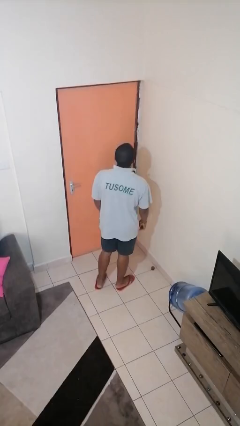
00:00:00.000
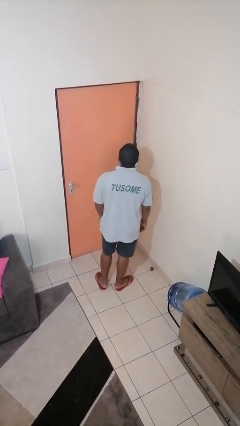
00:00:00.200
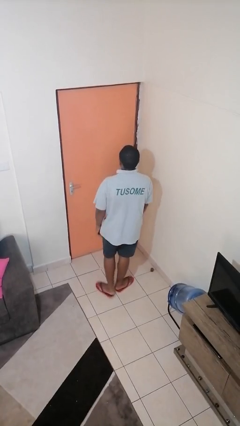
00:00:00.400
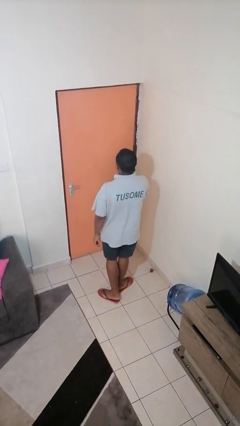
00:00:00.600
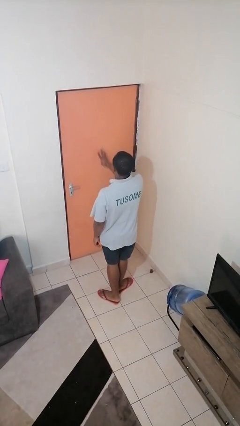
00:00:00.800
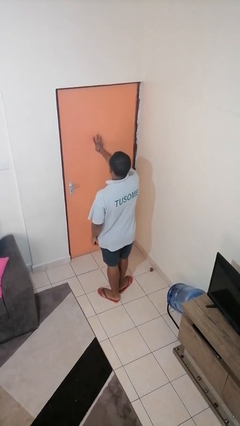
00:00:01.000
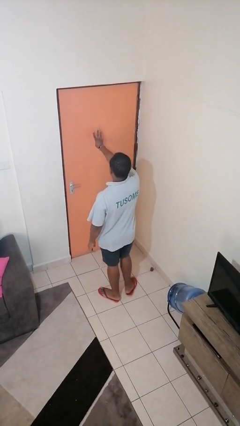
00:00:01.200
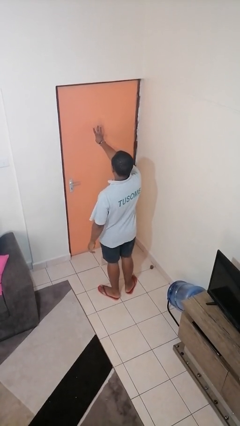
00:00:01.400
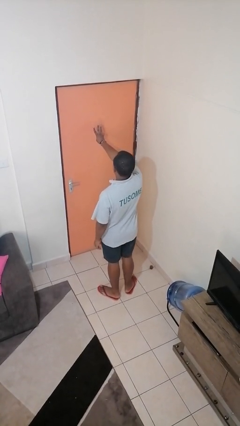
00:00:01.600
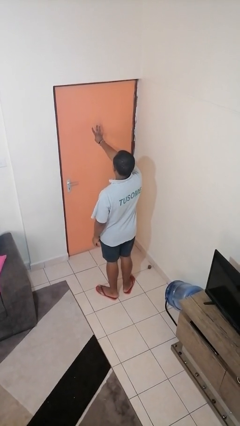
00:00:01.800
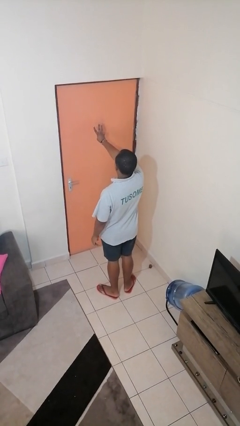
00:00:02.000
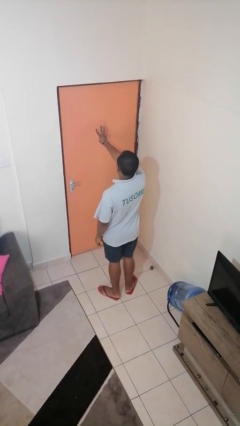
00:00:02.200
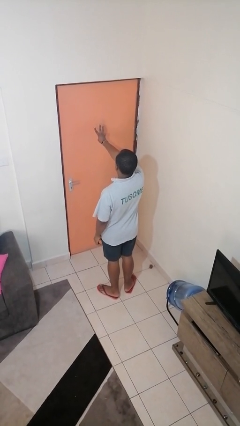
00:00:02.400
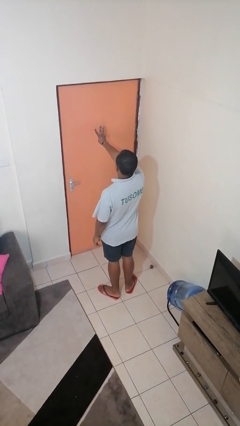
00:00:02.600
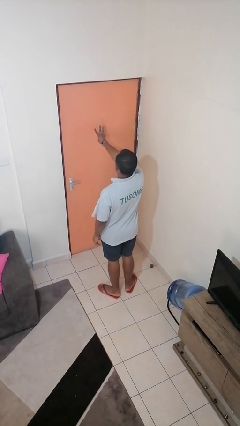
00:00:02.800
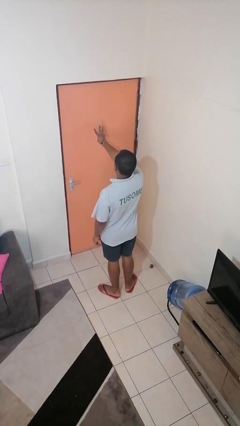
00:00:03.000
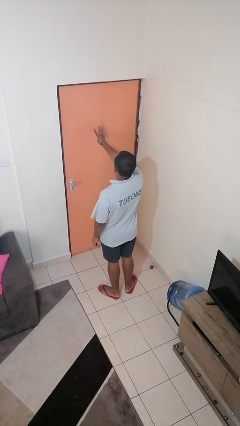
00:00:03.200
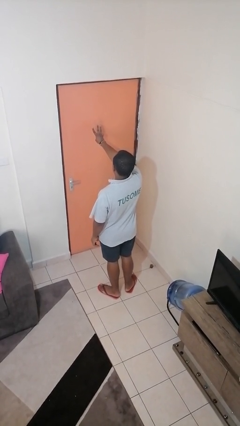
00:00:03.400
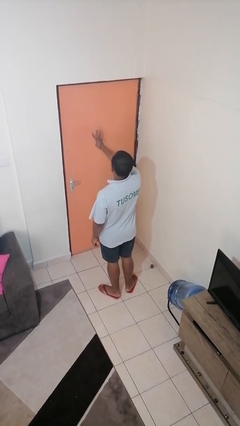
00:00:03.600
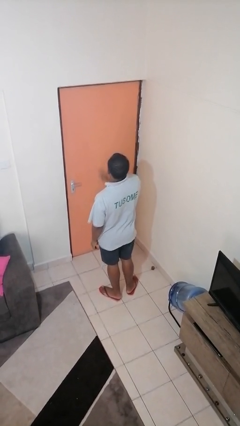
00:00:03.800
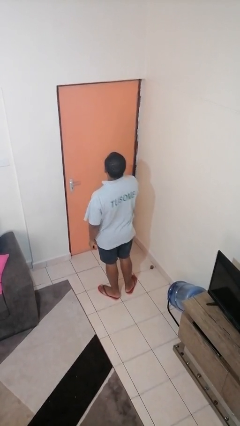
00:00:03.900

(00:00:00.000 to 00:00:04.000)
person gestures number three

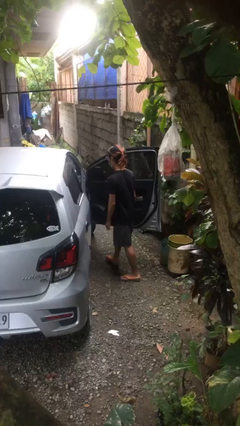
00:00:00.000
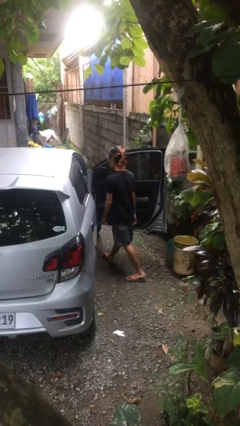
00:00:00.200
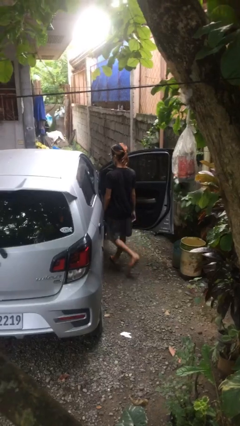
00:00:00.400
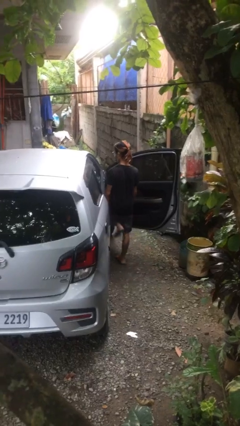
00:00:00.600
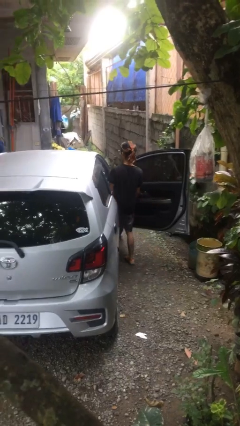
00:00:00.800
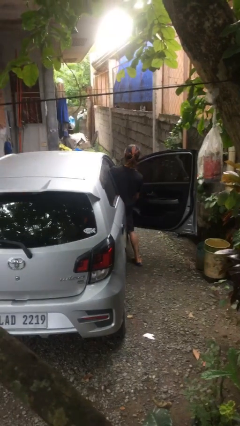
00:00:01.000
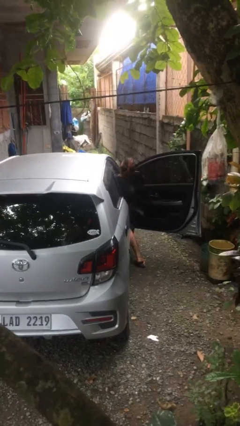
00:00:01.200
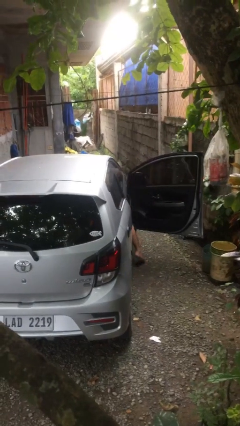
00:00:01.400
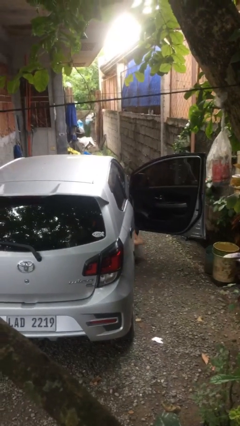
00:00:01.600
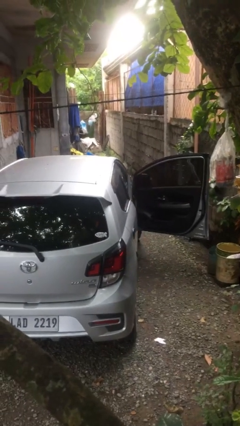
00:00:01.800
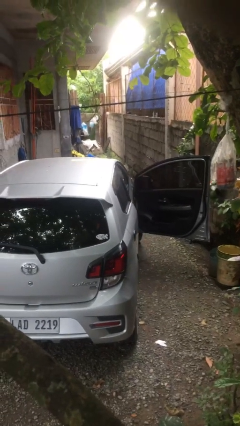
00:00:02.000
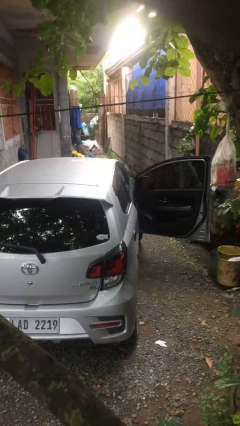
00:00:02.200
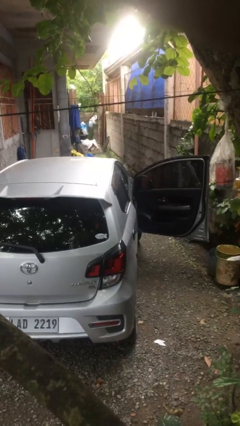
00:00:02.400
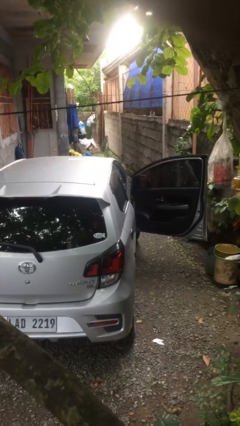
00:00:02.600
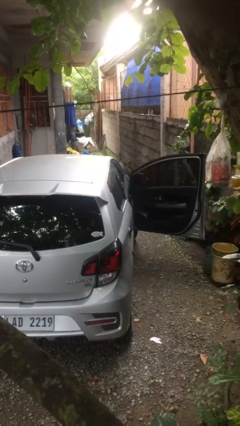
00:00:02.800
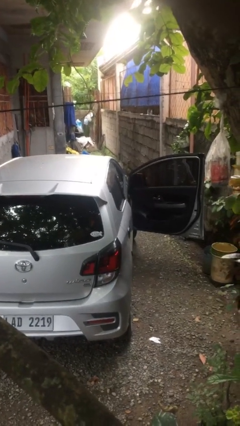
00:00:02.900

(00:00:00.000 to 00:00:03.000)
person enters car

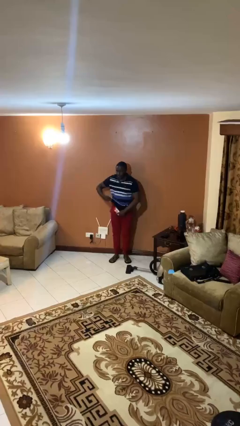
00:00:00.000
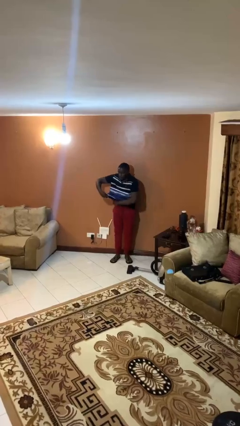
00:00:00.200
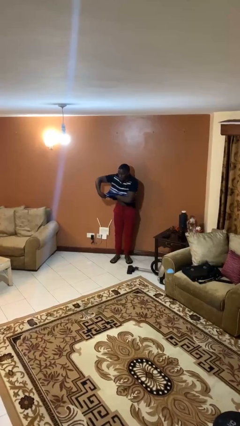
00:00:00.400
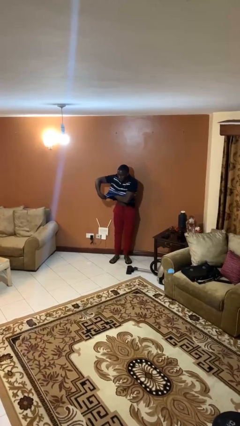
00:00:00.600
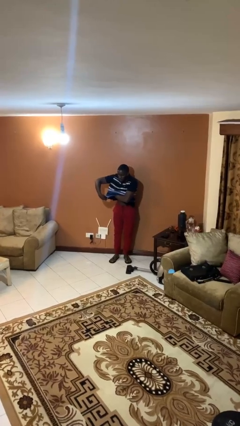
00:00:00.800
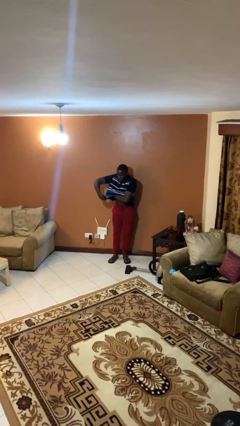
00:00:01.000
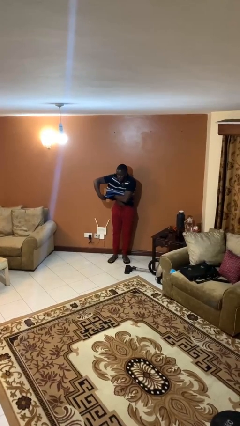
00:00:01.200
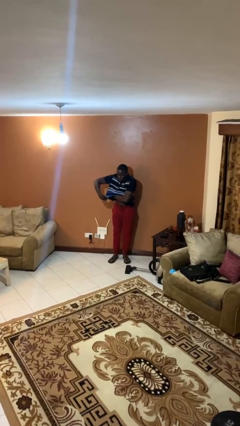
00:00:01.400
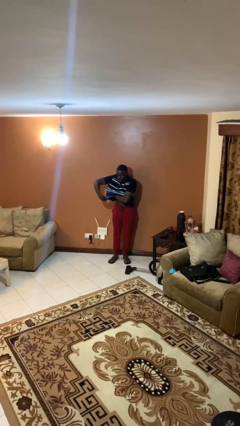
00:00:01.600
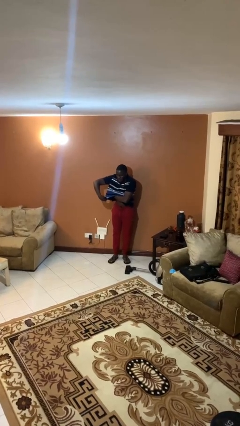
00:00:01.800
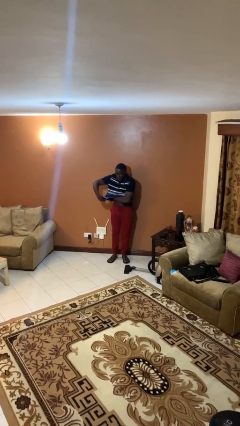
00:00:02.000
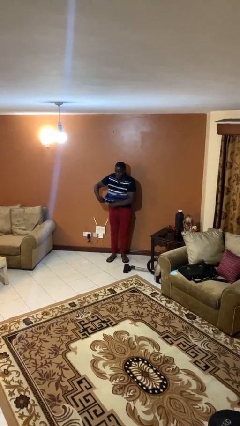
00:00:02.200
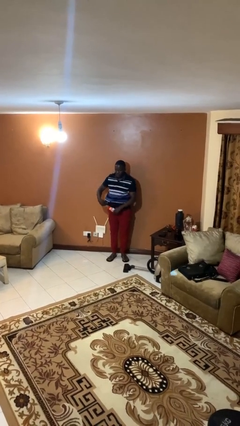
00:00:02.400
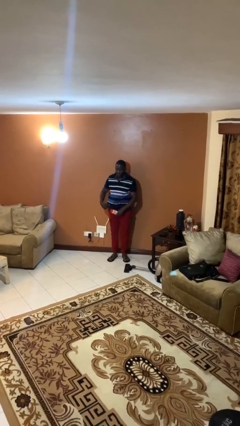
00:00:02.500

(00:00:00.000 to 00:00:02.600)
person applies deodorant

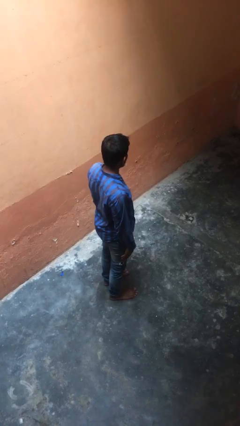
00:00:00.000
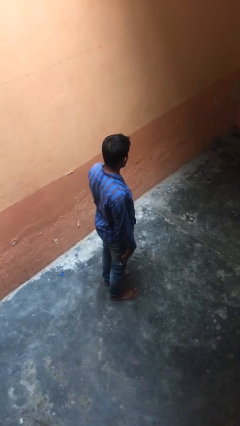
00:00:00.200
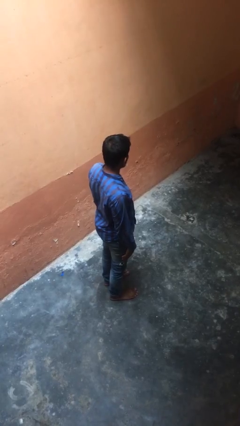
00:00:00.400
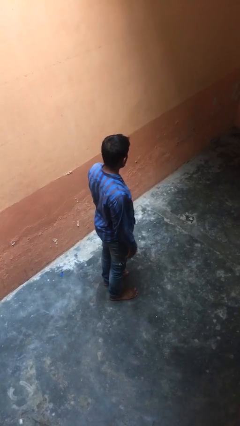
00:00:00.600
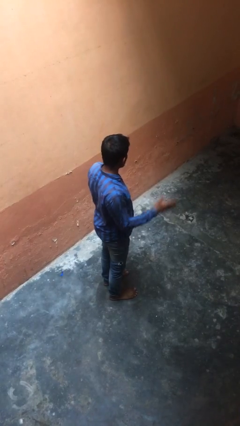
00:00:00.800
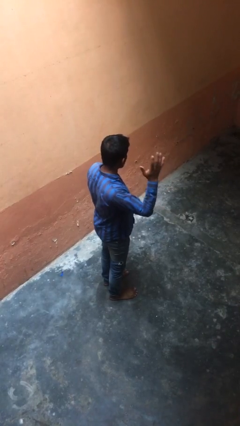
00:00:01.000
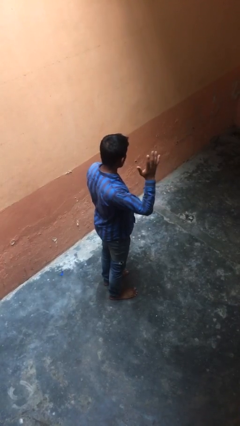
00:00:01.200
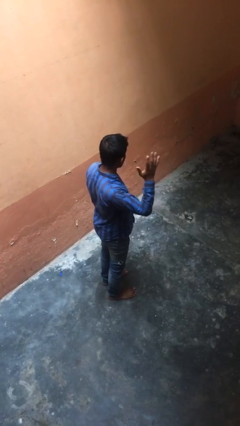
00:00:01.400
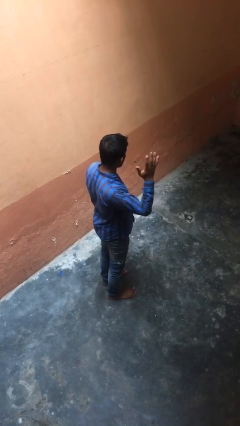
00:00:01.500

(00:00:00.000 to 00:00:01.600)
person gestures number five

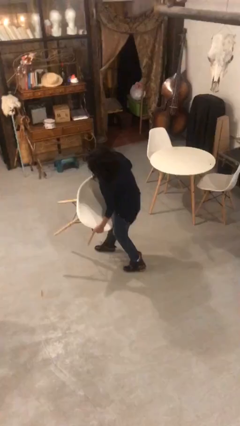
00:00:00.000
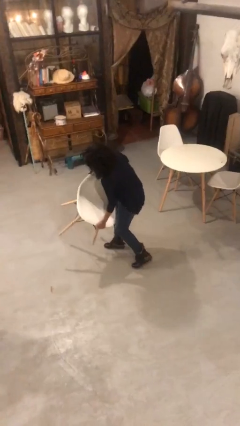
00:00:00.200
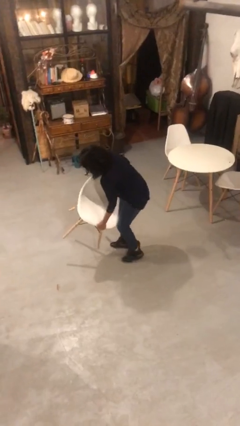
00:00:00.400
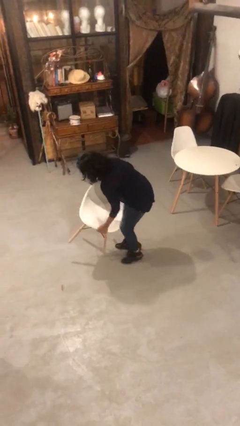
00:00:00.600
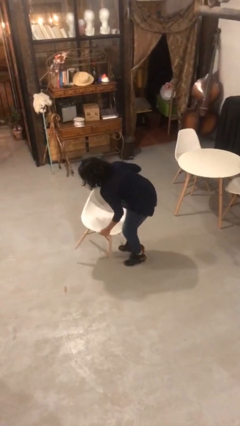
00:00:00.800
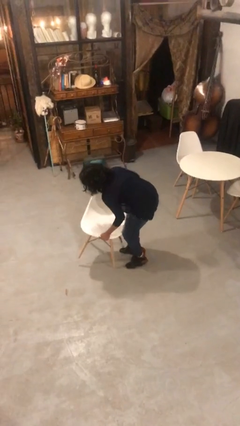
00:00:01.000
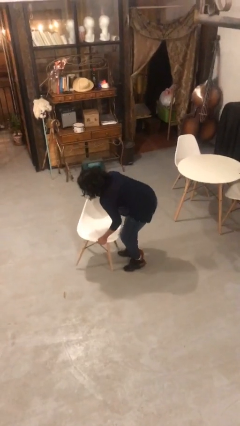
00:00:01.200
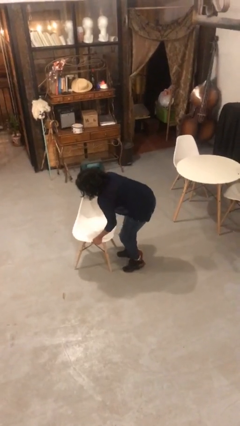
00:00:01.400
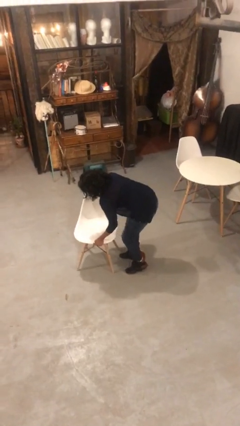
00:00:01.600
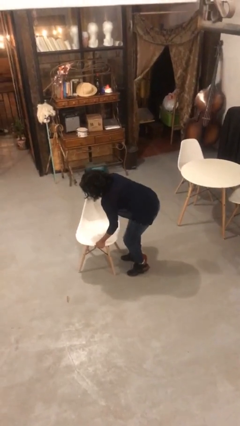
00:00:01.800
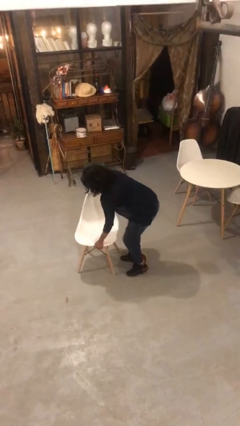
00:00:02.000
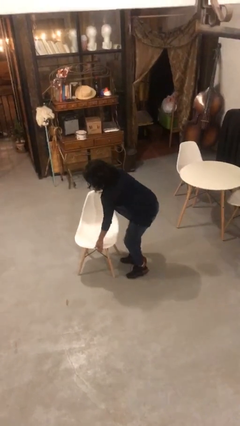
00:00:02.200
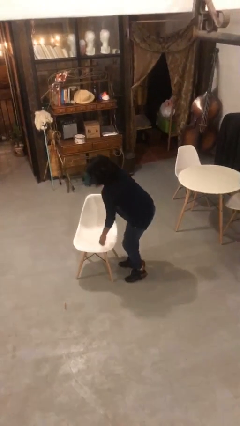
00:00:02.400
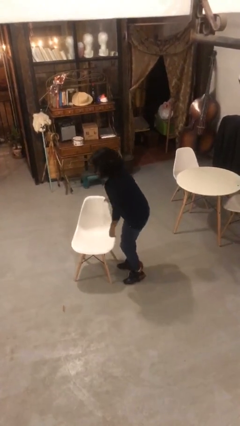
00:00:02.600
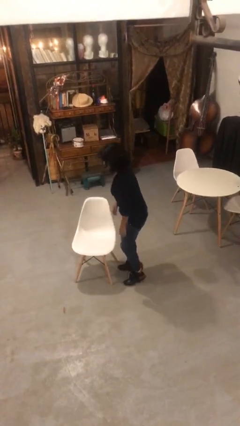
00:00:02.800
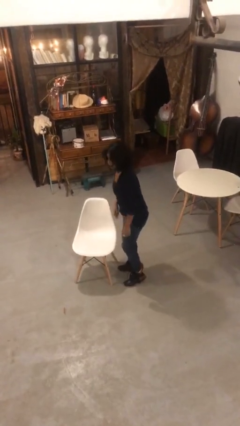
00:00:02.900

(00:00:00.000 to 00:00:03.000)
person puts down object on floor

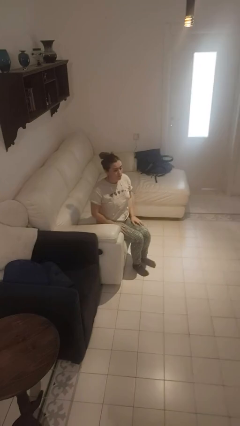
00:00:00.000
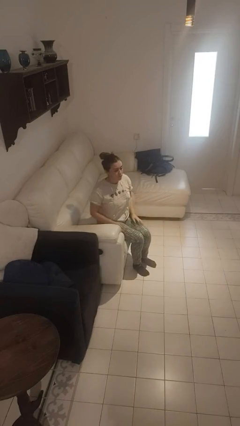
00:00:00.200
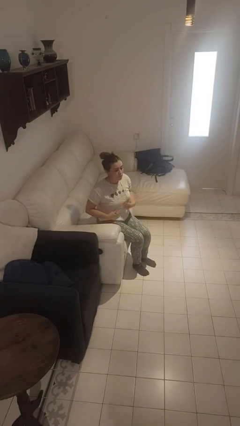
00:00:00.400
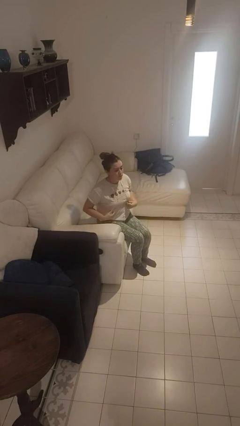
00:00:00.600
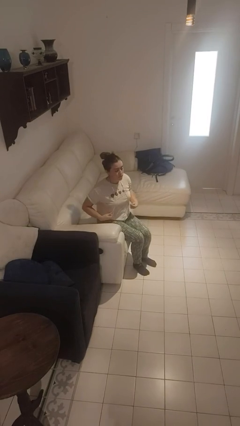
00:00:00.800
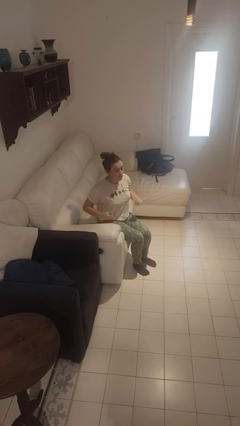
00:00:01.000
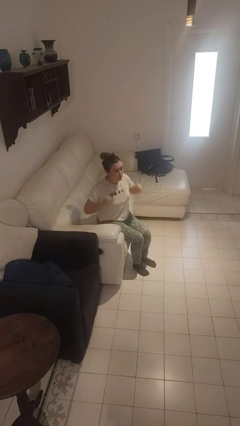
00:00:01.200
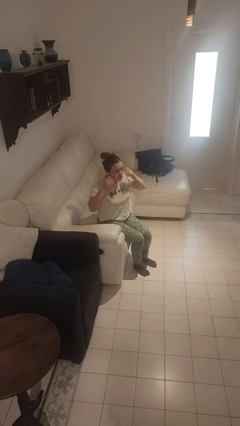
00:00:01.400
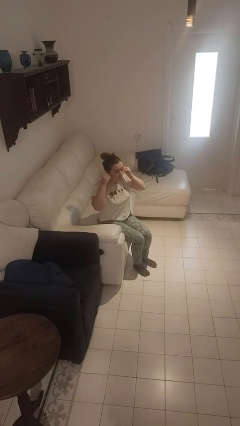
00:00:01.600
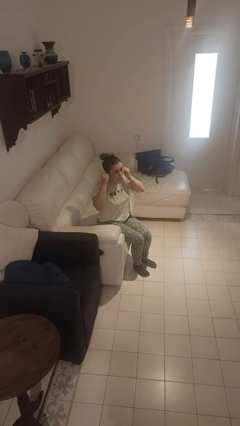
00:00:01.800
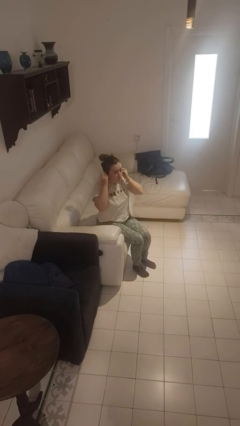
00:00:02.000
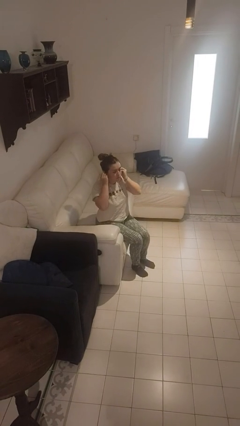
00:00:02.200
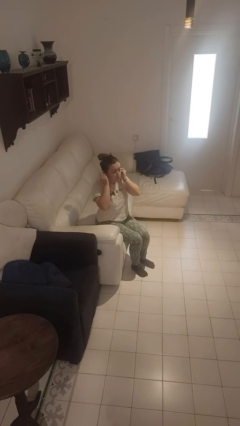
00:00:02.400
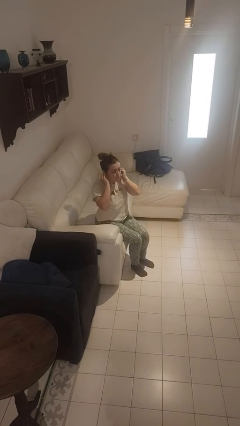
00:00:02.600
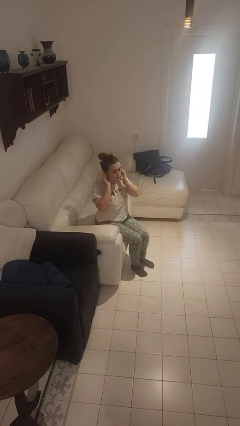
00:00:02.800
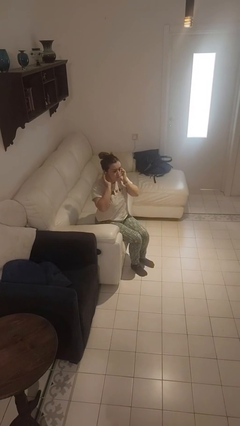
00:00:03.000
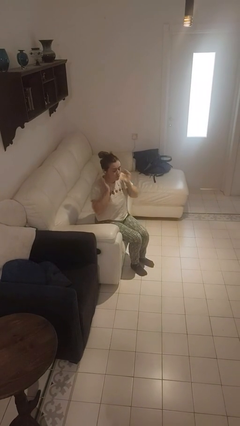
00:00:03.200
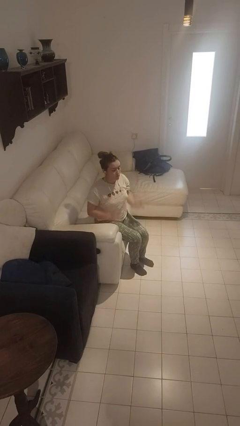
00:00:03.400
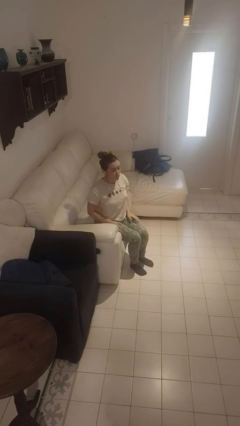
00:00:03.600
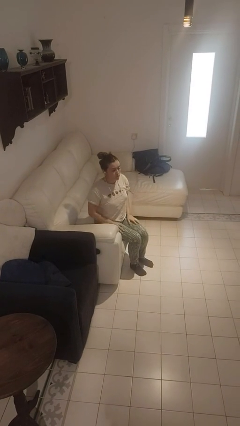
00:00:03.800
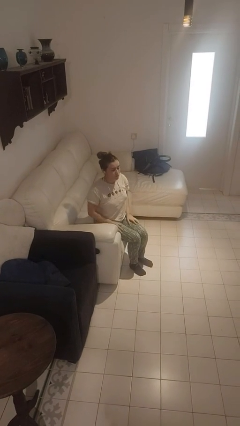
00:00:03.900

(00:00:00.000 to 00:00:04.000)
person puts on headphones
